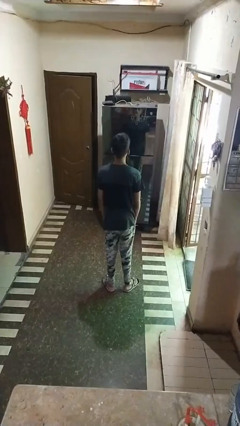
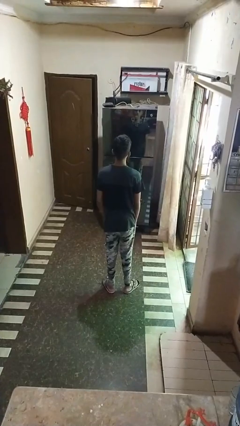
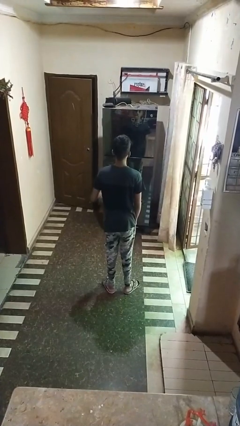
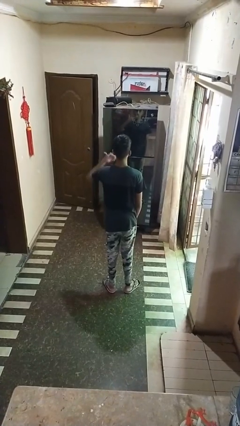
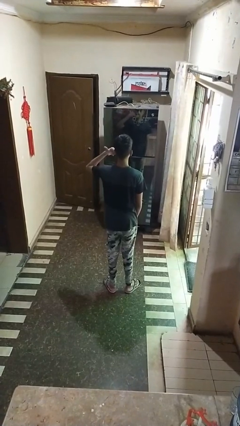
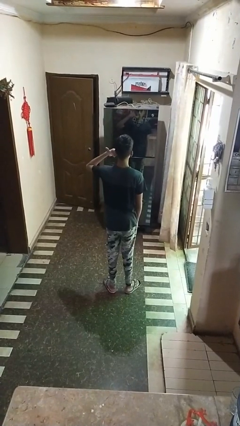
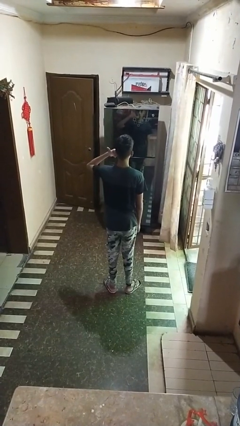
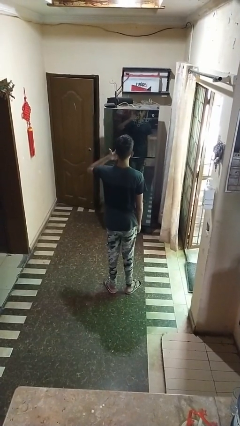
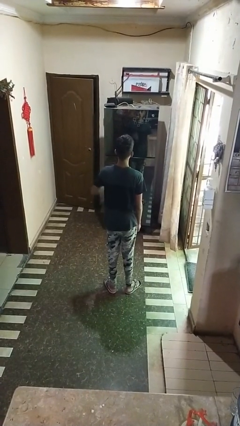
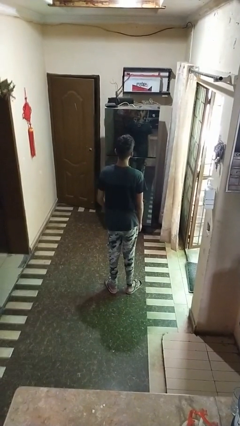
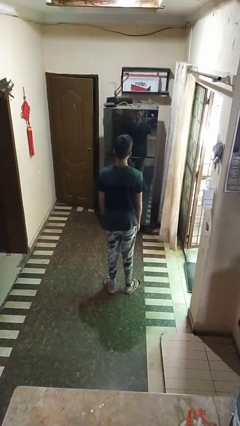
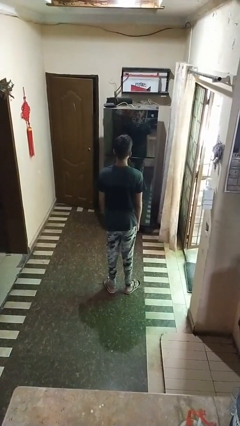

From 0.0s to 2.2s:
person gestures call me

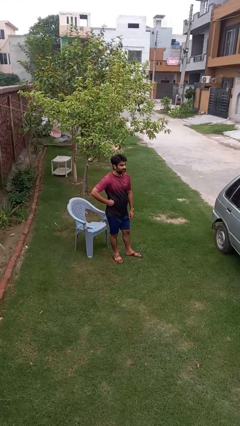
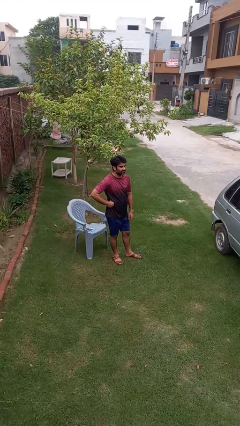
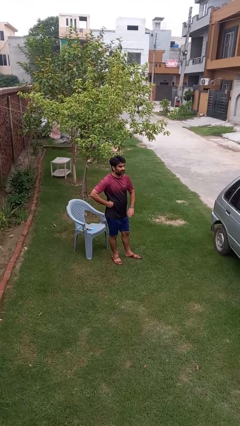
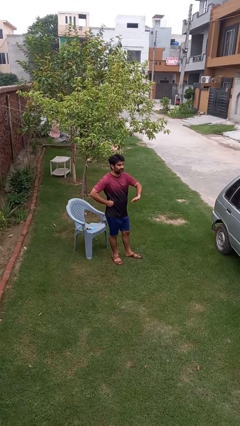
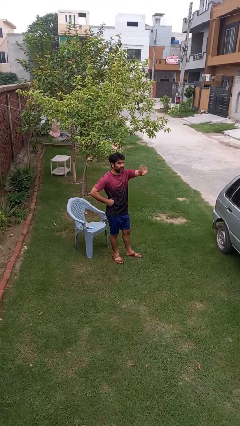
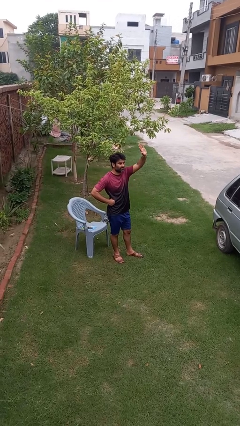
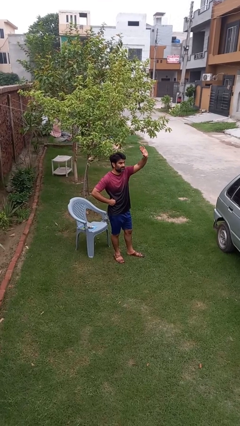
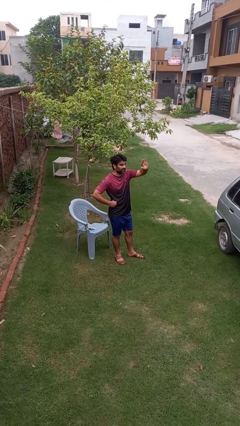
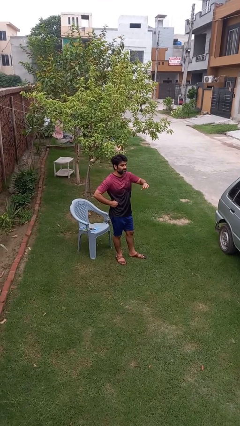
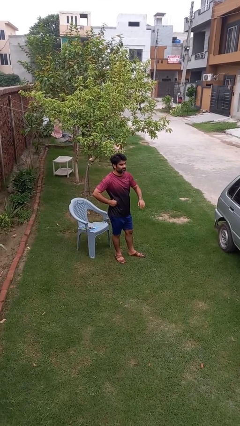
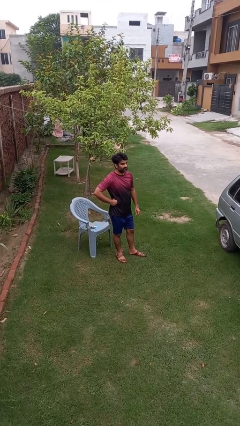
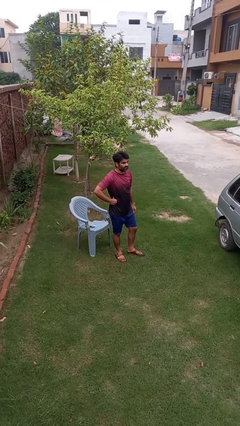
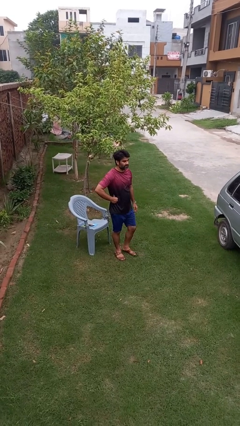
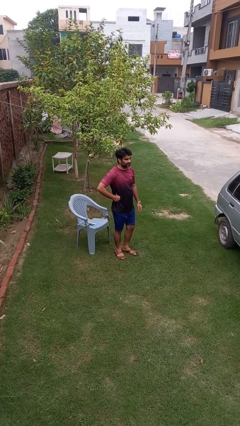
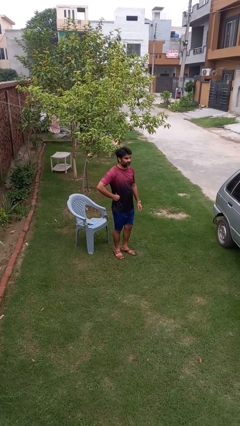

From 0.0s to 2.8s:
person gestures swipe up

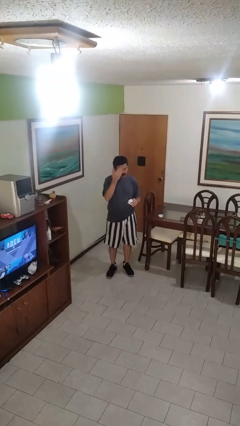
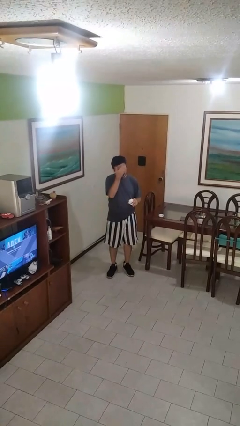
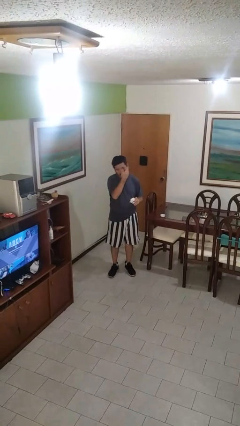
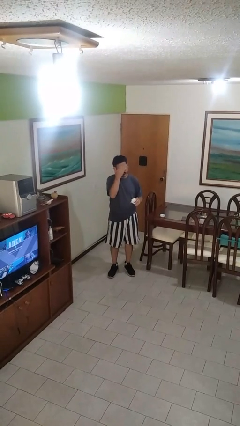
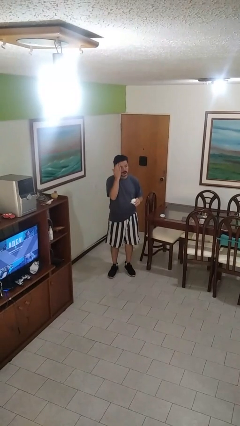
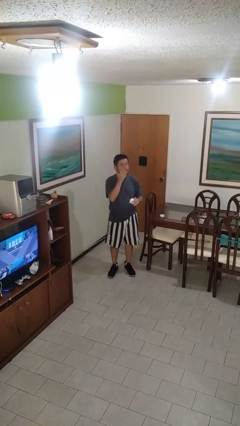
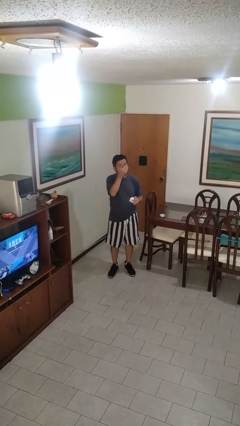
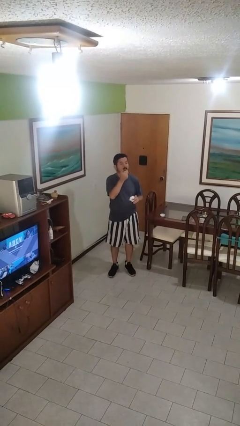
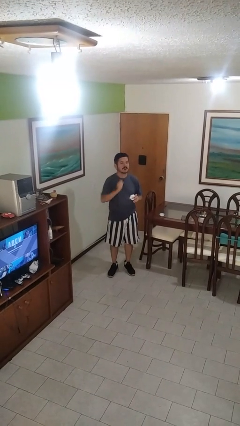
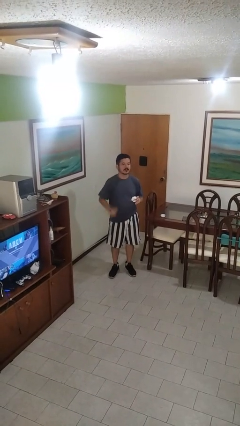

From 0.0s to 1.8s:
person applies facial moisturizer

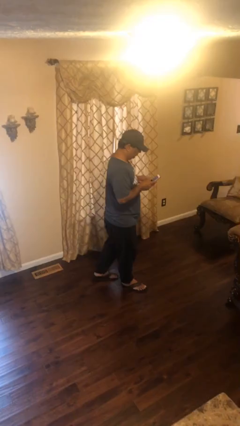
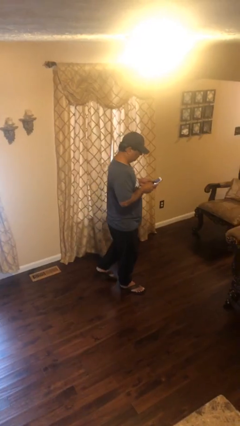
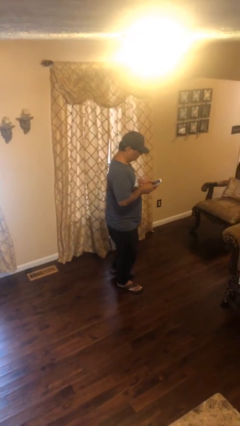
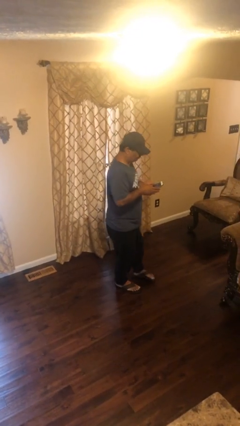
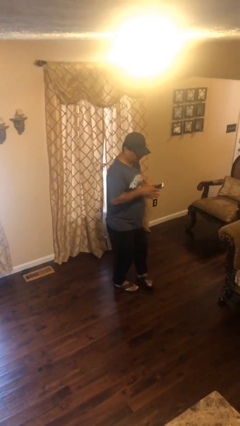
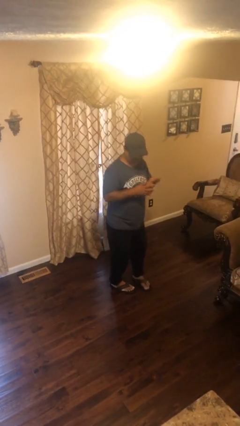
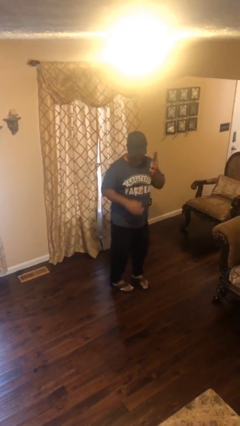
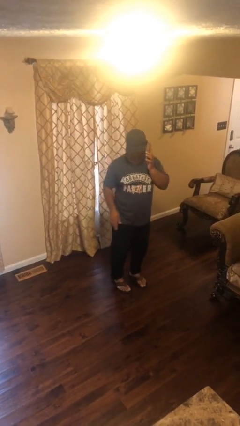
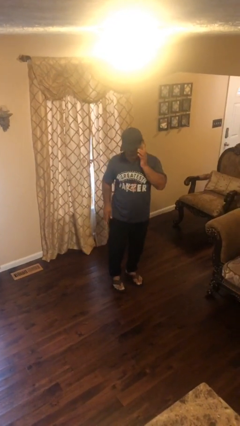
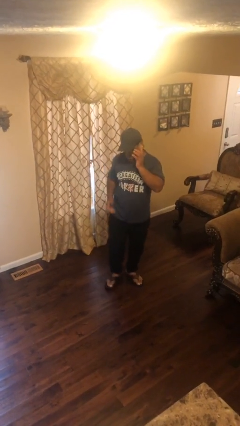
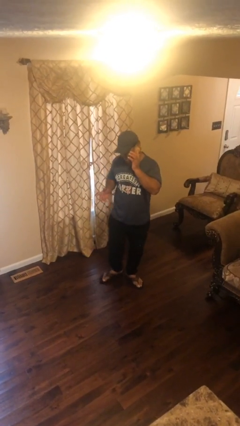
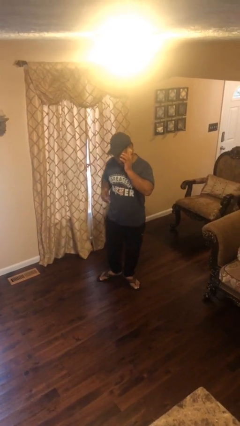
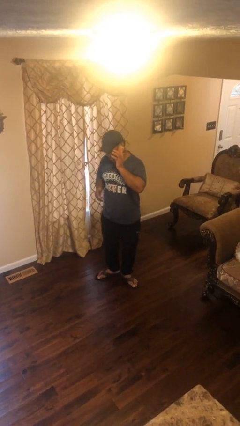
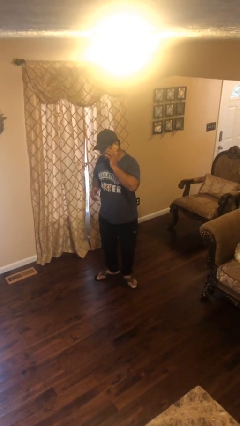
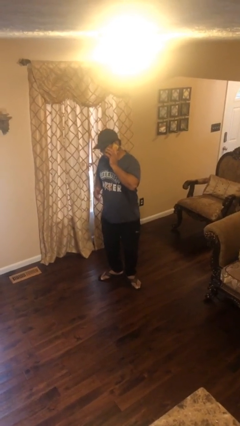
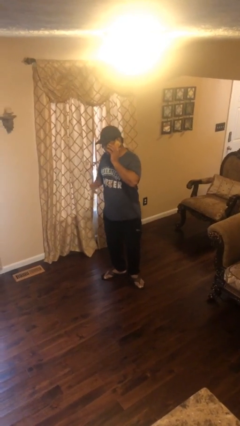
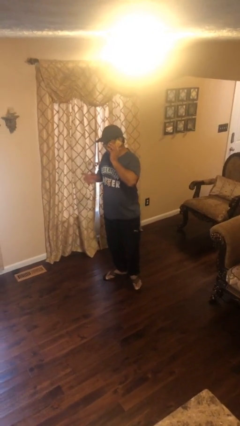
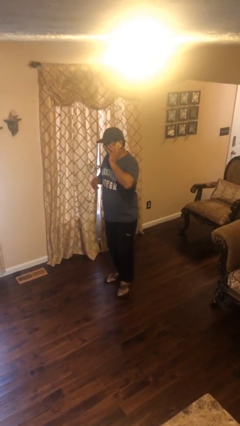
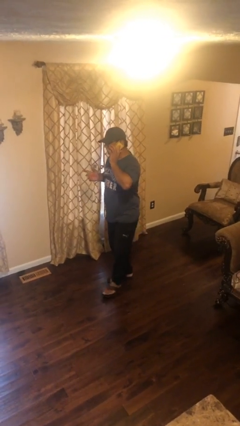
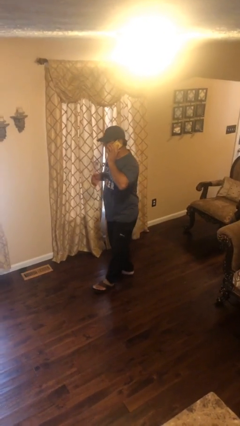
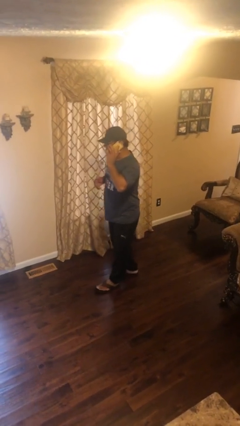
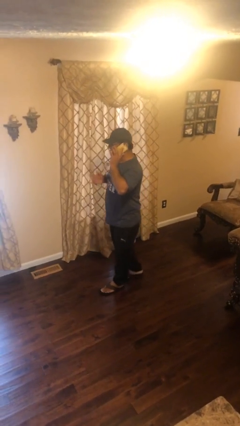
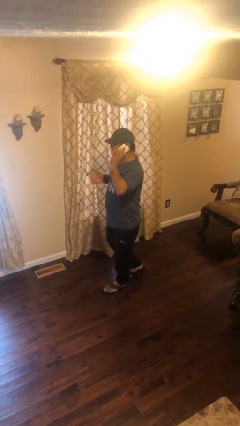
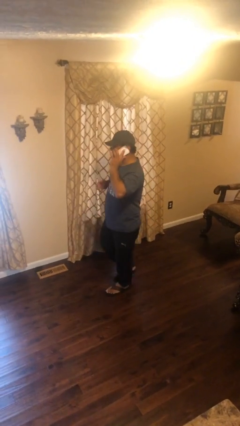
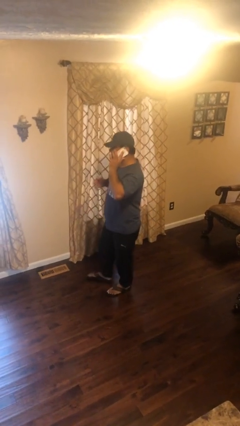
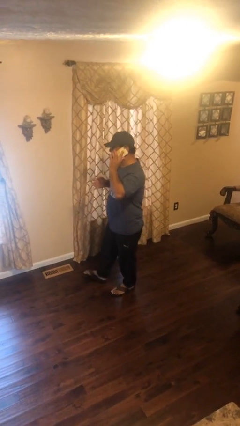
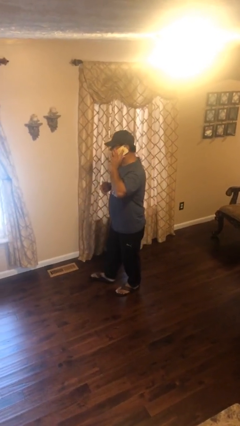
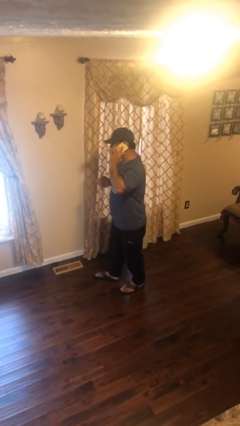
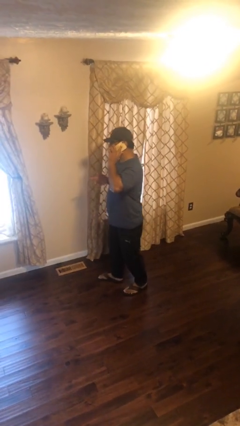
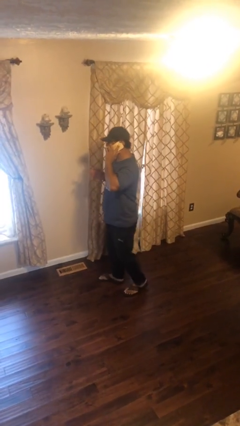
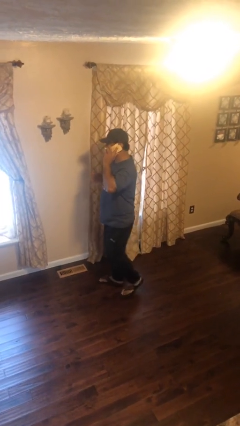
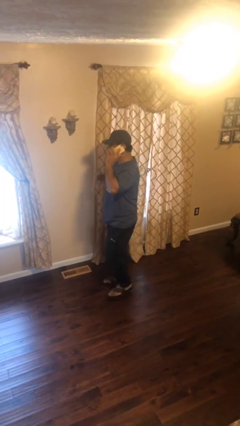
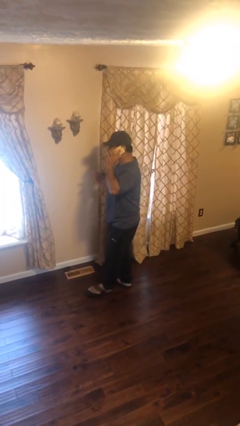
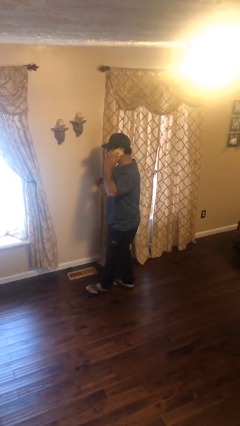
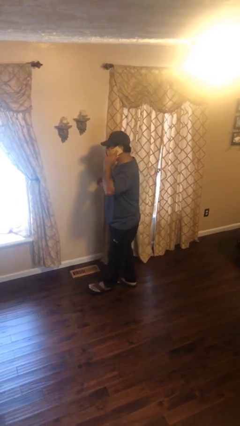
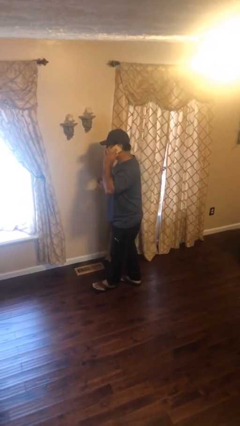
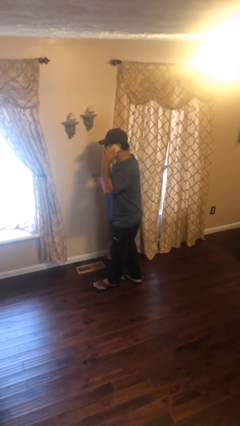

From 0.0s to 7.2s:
person talks on phone

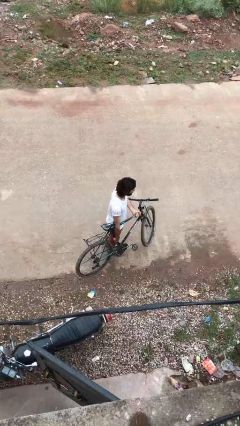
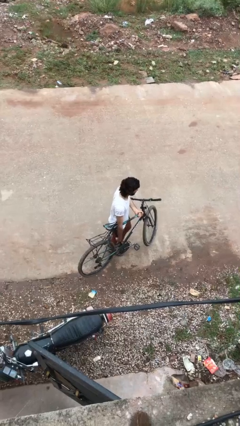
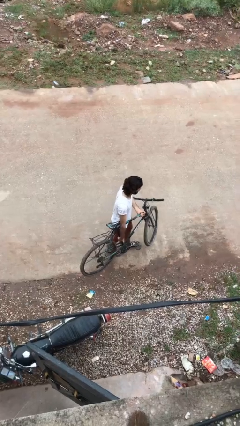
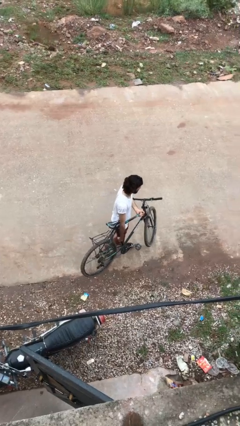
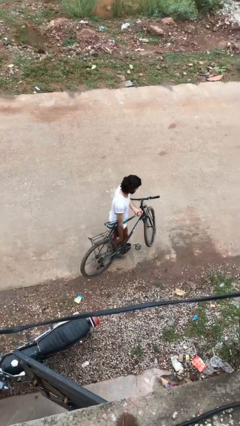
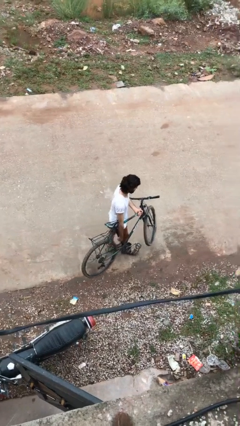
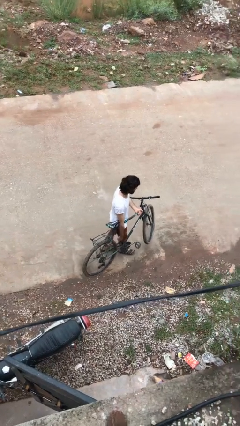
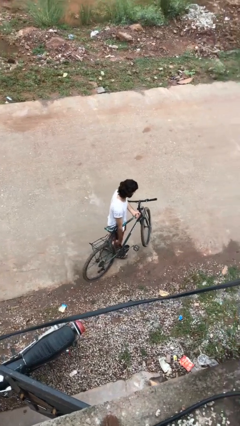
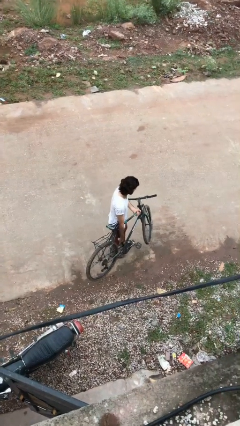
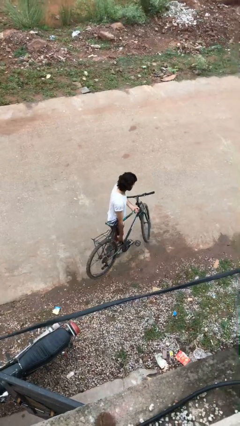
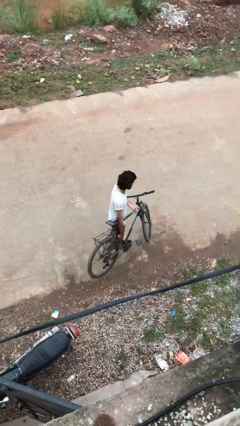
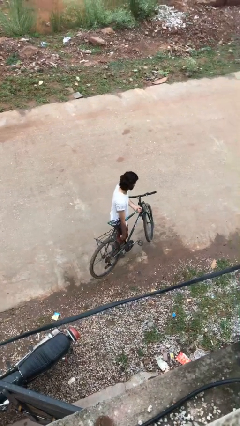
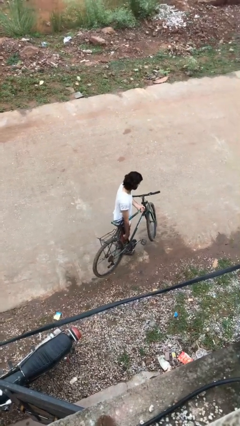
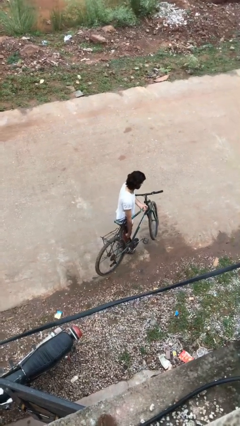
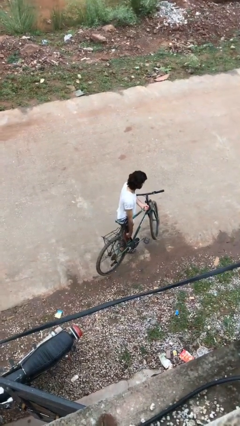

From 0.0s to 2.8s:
person carries bicycle

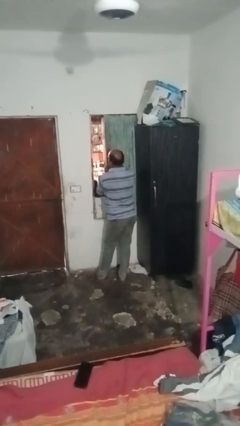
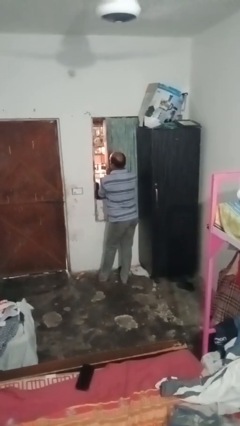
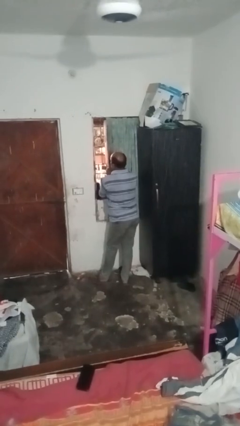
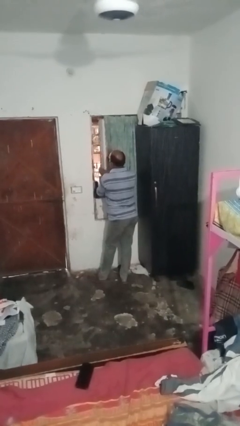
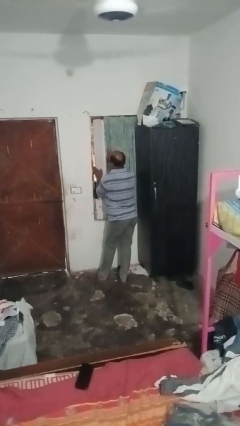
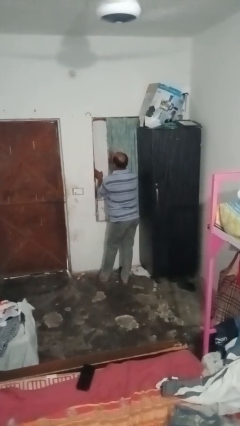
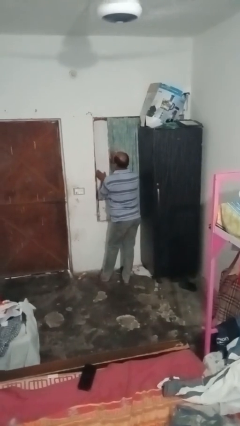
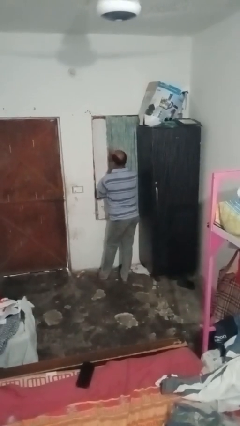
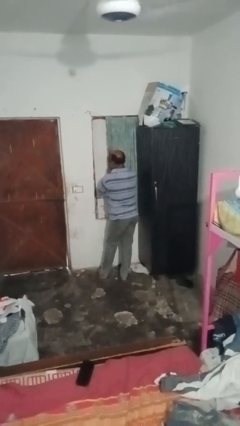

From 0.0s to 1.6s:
person closes home window
